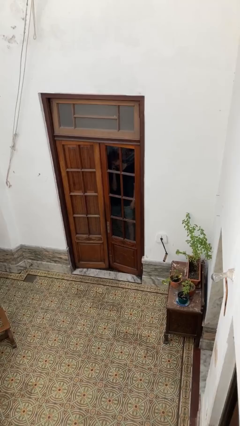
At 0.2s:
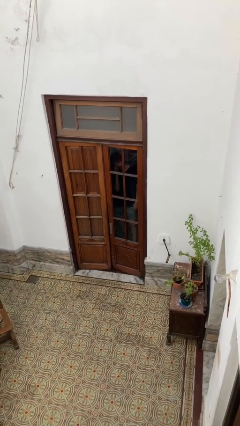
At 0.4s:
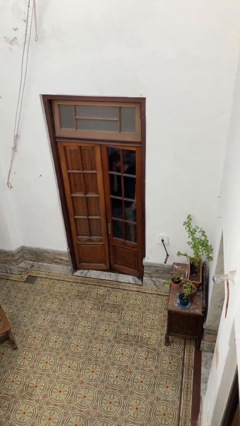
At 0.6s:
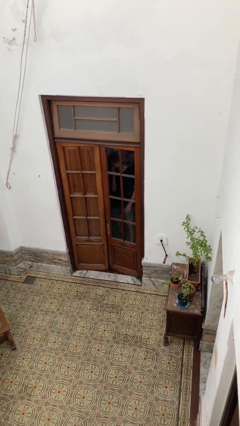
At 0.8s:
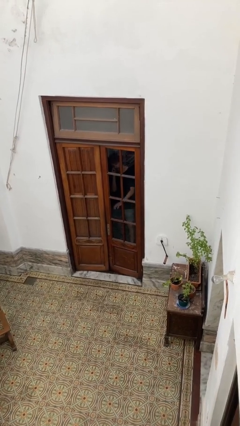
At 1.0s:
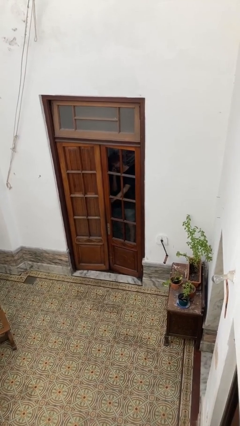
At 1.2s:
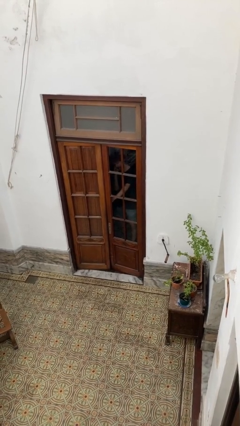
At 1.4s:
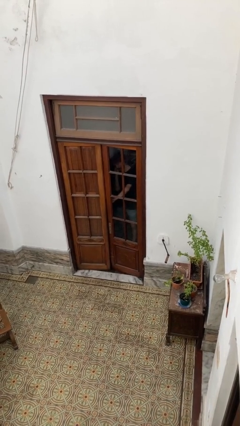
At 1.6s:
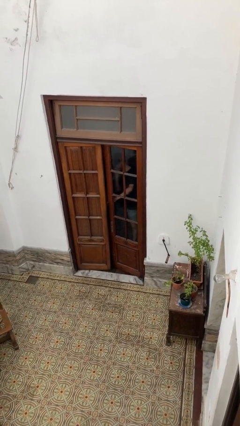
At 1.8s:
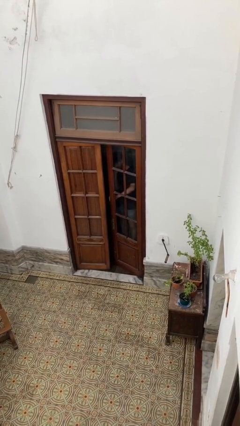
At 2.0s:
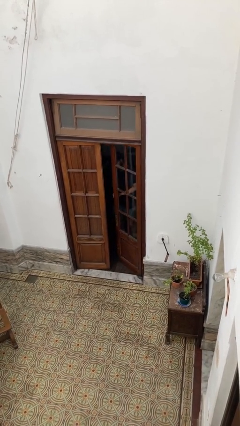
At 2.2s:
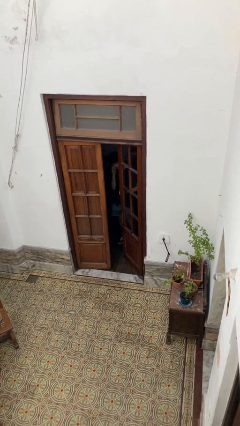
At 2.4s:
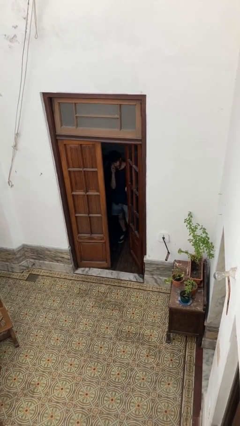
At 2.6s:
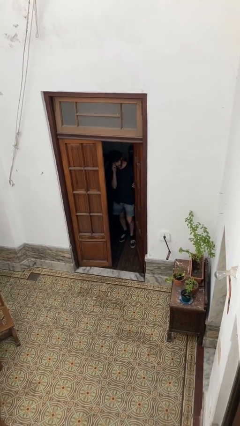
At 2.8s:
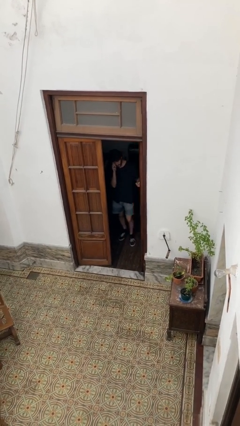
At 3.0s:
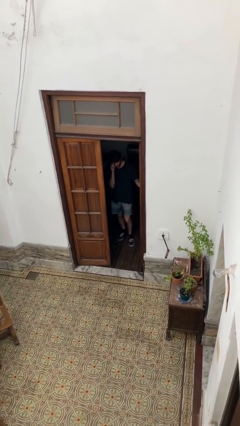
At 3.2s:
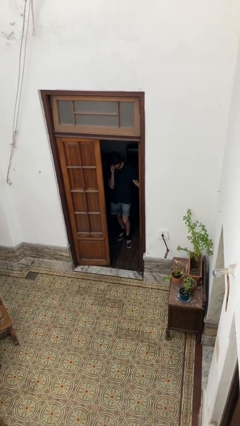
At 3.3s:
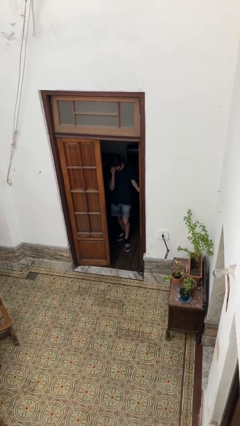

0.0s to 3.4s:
person opens facility door

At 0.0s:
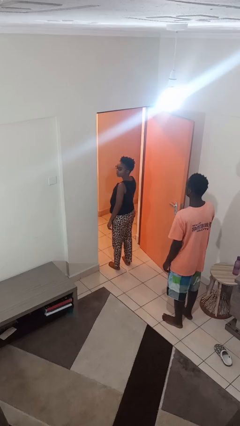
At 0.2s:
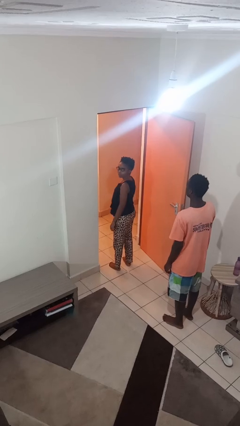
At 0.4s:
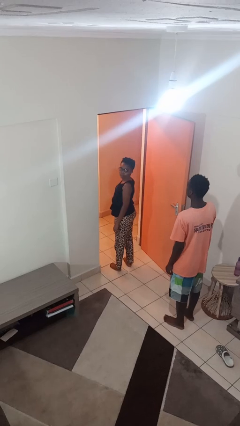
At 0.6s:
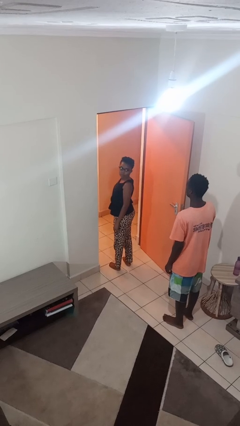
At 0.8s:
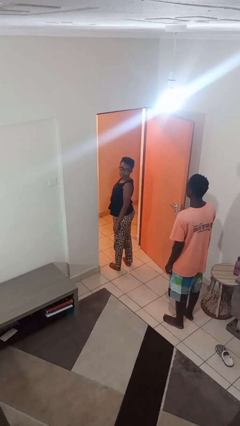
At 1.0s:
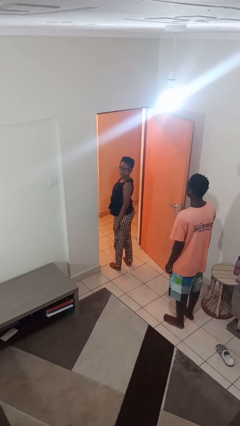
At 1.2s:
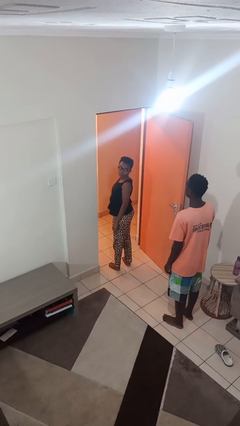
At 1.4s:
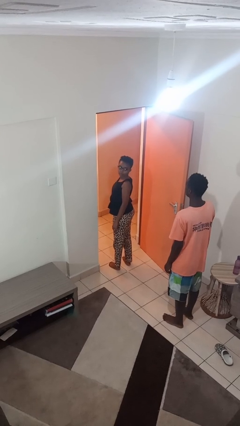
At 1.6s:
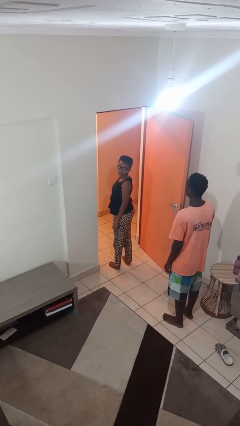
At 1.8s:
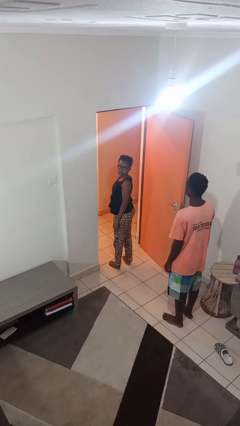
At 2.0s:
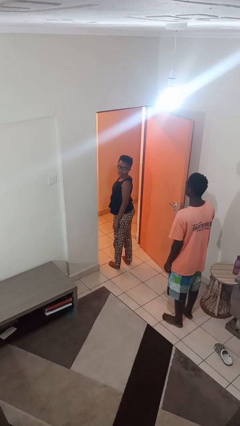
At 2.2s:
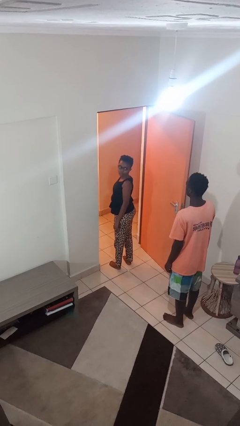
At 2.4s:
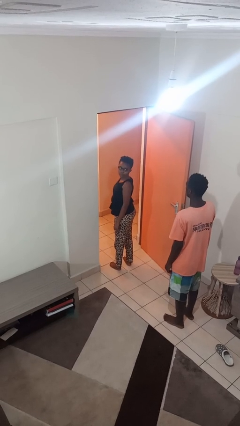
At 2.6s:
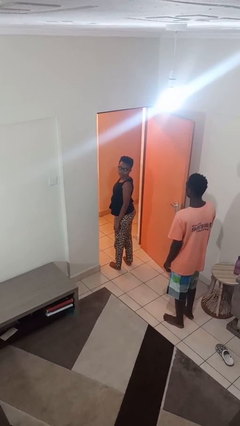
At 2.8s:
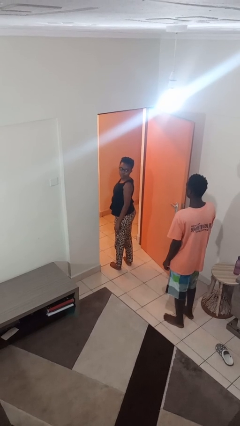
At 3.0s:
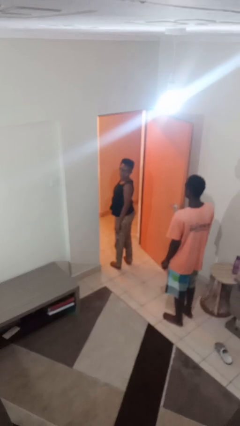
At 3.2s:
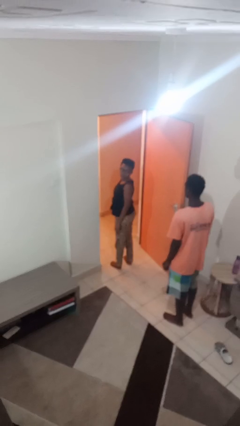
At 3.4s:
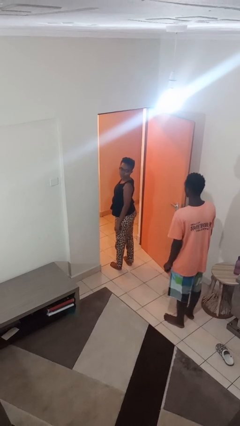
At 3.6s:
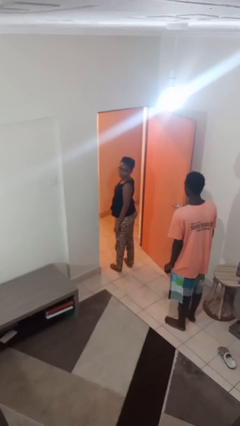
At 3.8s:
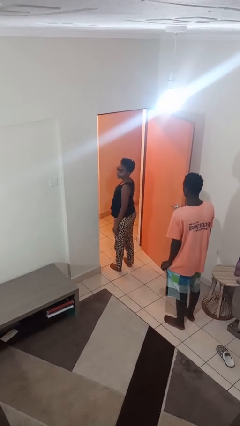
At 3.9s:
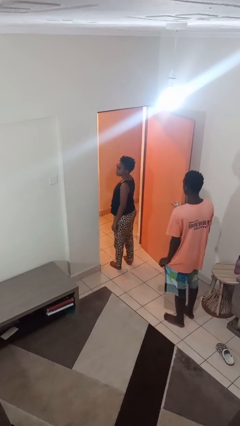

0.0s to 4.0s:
person looks over shoulder

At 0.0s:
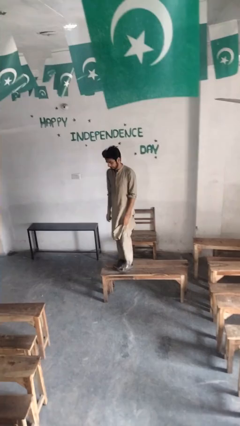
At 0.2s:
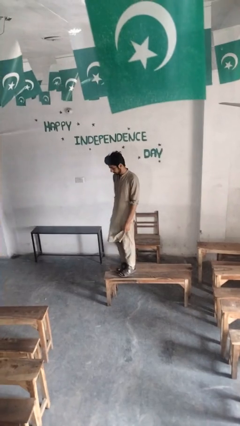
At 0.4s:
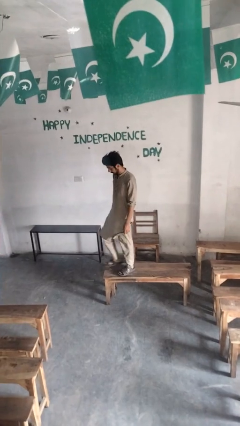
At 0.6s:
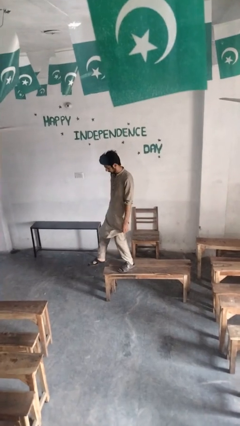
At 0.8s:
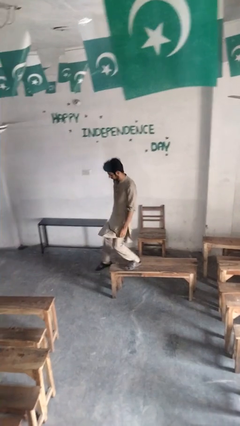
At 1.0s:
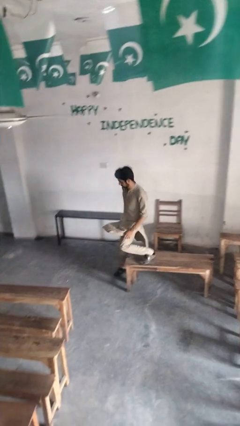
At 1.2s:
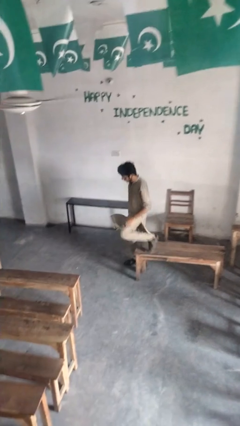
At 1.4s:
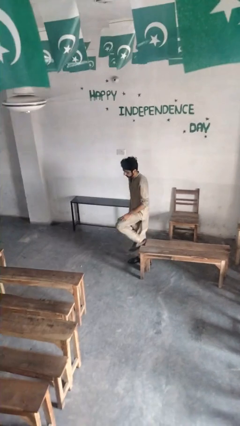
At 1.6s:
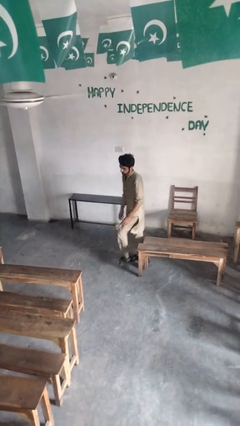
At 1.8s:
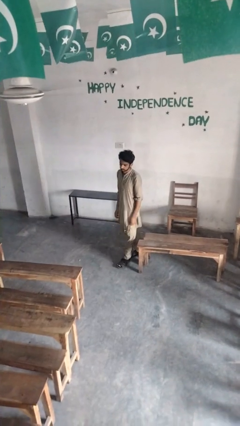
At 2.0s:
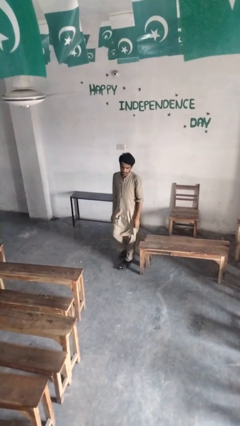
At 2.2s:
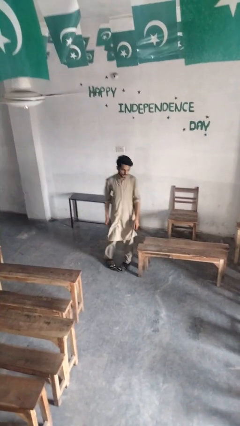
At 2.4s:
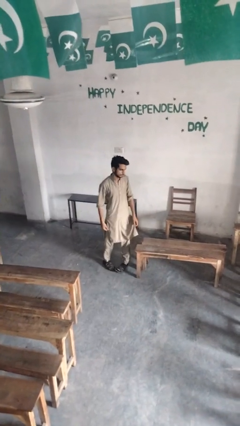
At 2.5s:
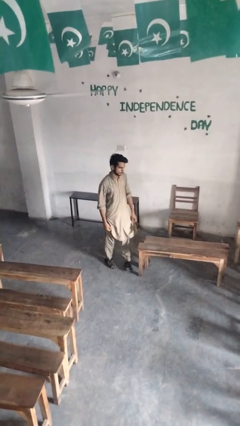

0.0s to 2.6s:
person climbs off table

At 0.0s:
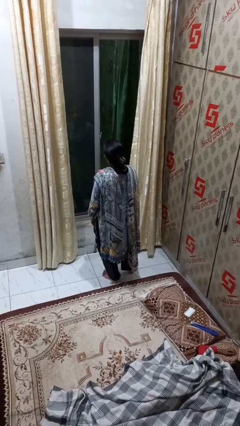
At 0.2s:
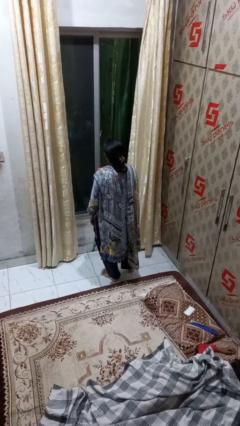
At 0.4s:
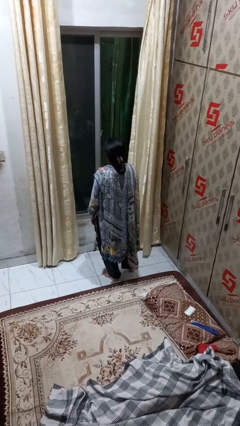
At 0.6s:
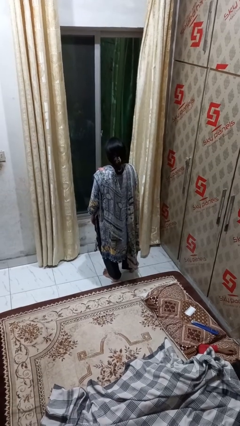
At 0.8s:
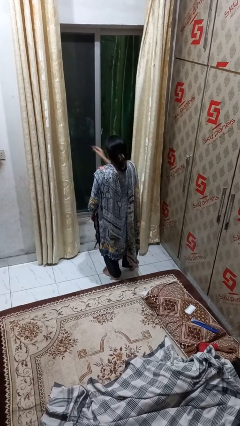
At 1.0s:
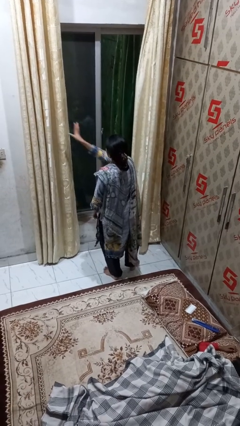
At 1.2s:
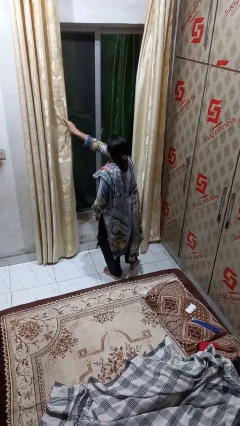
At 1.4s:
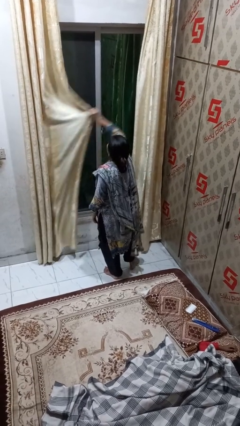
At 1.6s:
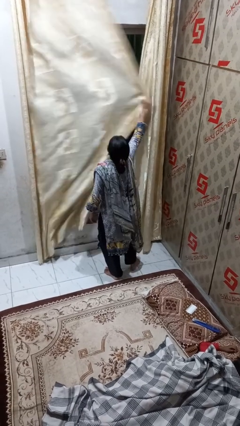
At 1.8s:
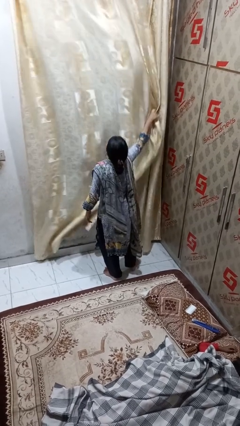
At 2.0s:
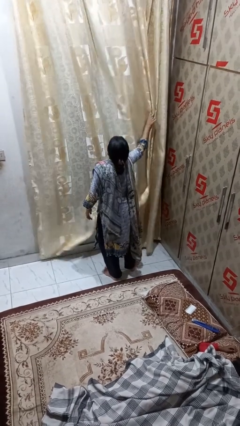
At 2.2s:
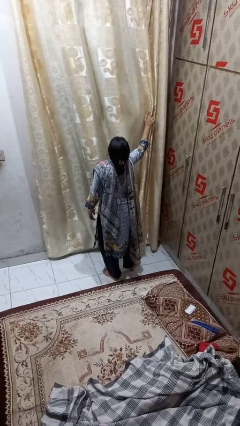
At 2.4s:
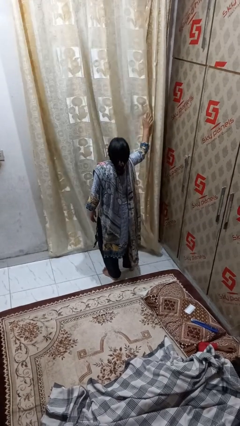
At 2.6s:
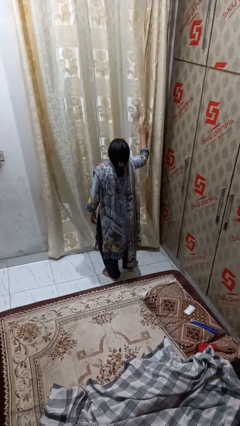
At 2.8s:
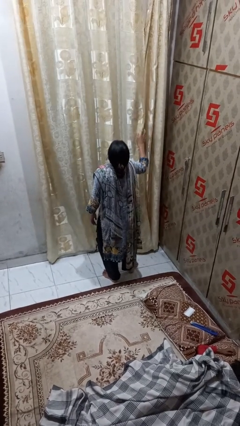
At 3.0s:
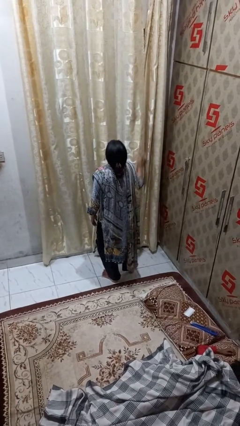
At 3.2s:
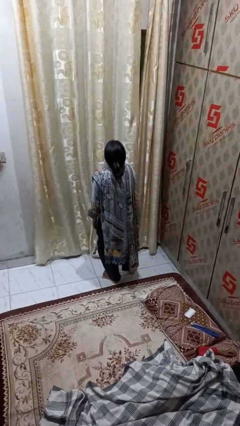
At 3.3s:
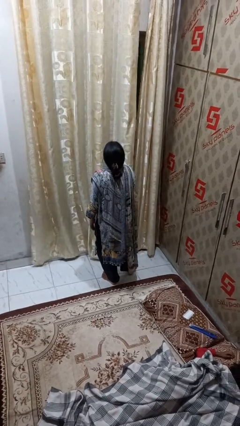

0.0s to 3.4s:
person closes curtains

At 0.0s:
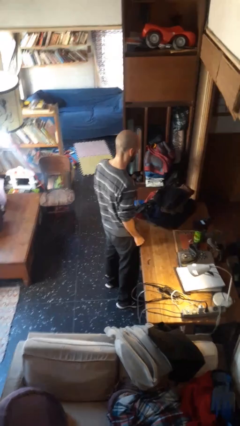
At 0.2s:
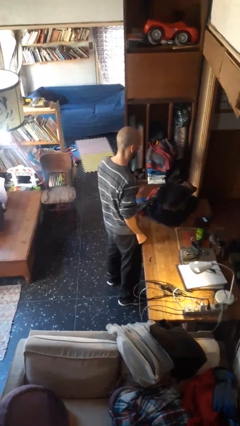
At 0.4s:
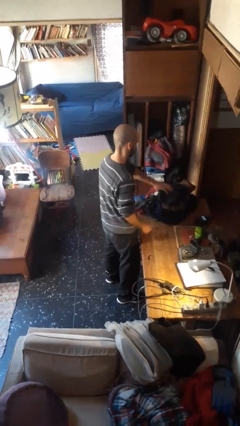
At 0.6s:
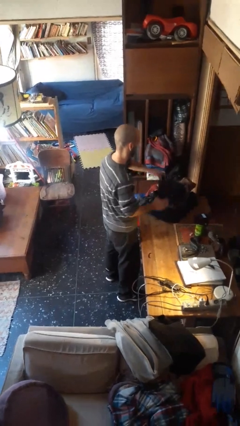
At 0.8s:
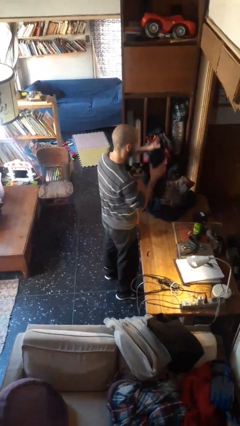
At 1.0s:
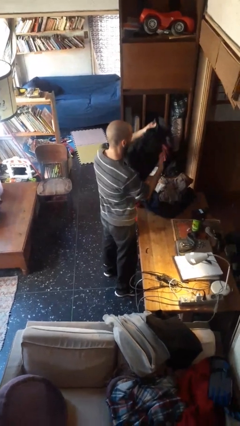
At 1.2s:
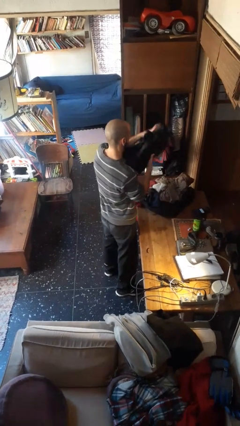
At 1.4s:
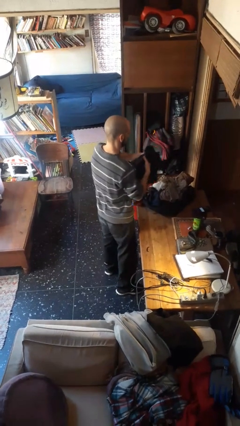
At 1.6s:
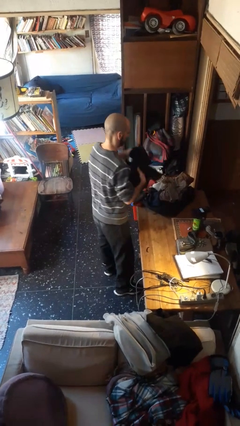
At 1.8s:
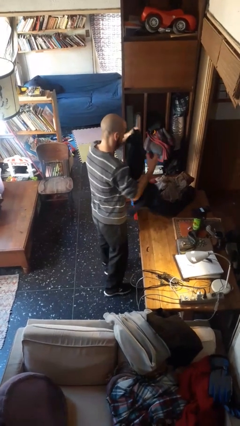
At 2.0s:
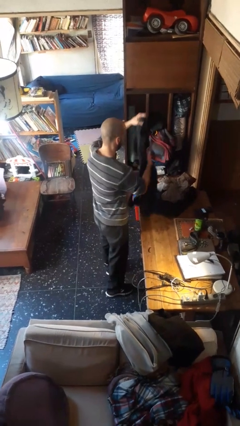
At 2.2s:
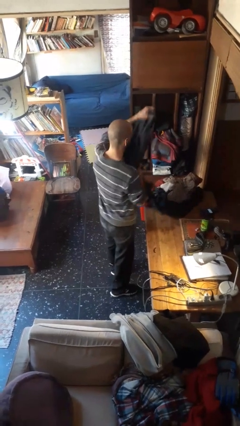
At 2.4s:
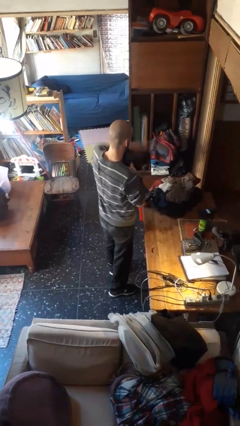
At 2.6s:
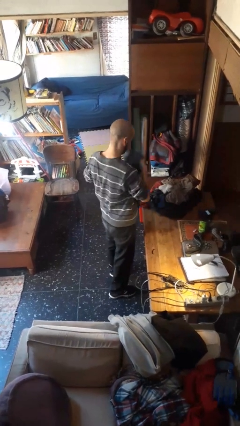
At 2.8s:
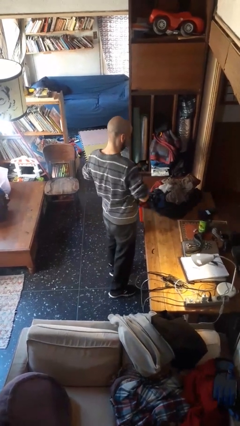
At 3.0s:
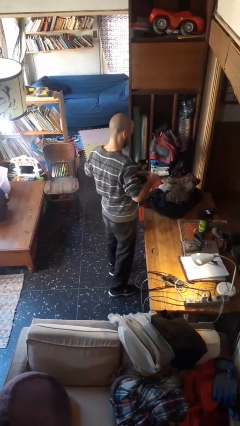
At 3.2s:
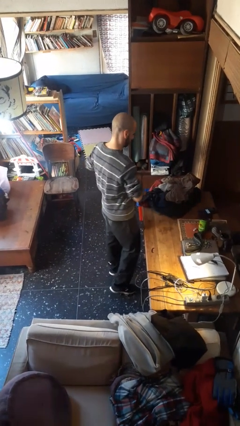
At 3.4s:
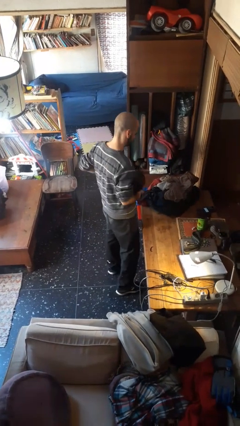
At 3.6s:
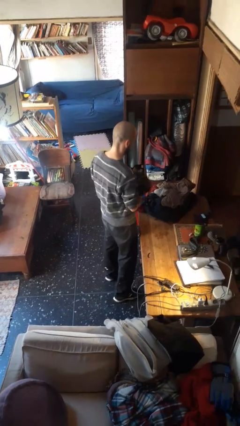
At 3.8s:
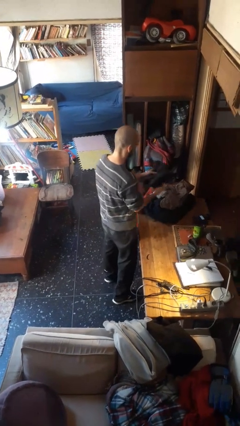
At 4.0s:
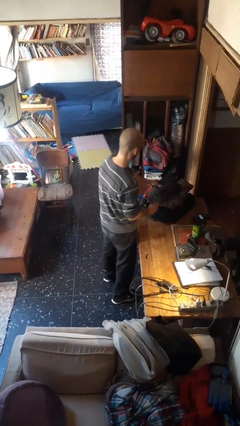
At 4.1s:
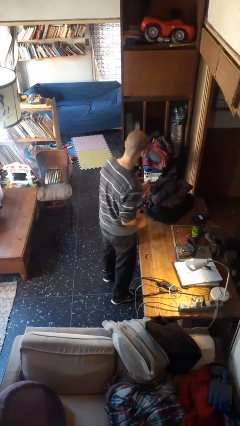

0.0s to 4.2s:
person folds pants

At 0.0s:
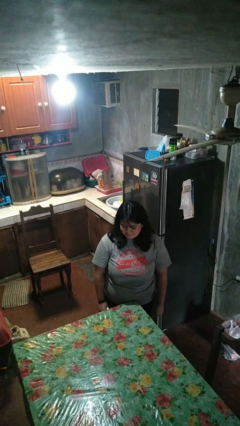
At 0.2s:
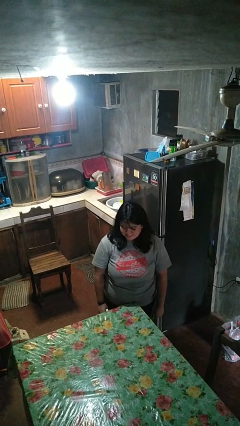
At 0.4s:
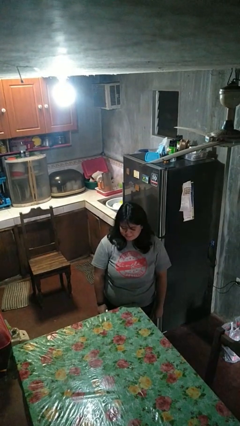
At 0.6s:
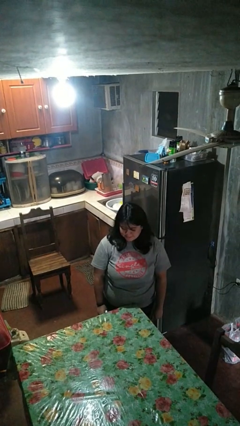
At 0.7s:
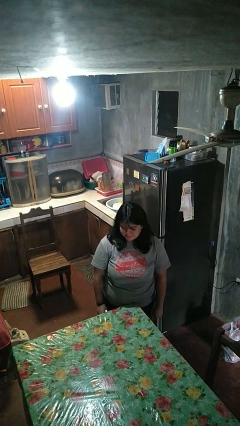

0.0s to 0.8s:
person sprays from bottle
